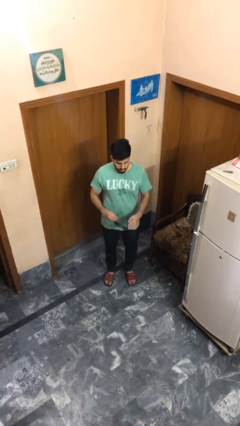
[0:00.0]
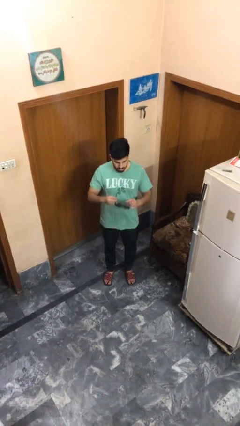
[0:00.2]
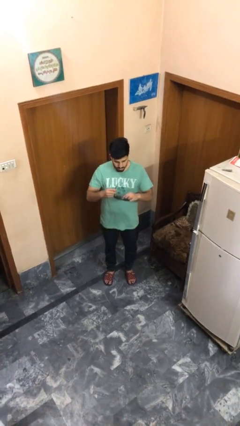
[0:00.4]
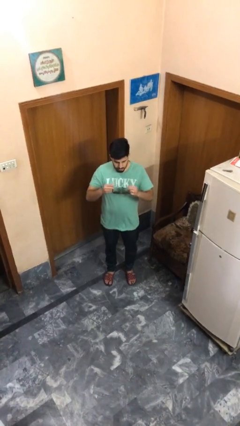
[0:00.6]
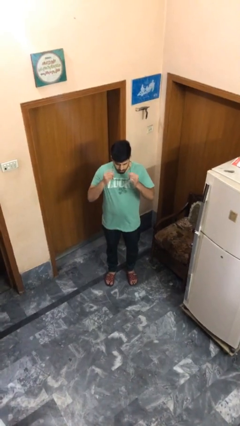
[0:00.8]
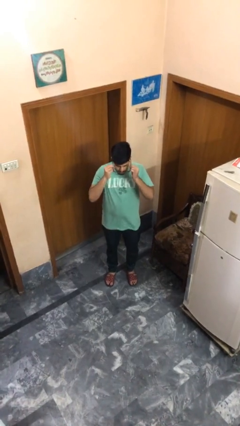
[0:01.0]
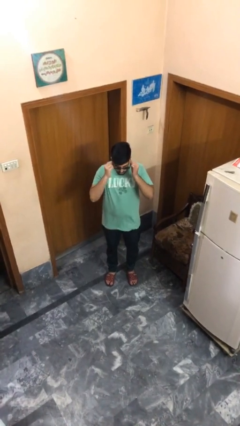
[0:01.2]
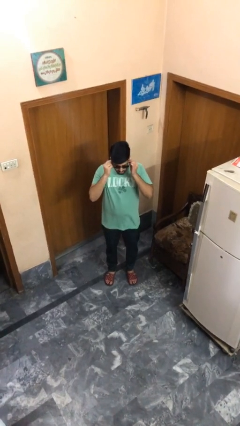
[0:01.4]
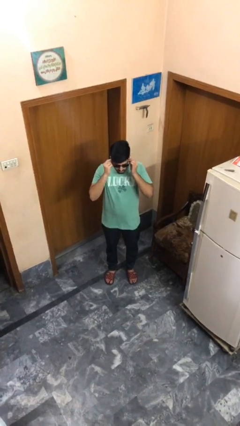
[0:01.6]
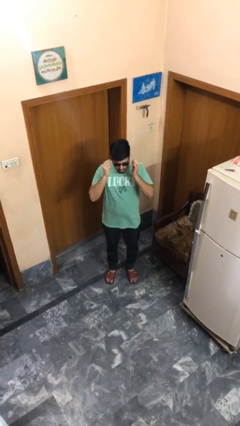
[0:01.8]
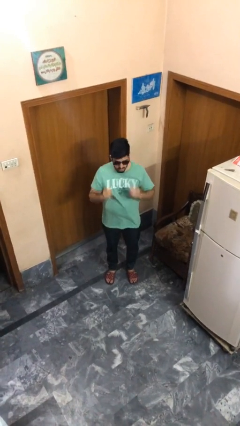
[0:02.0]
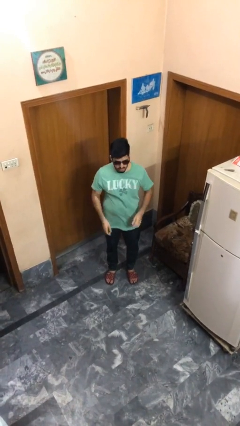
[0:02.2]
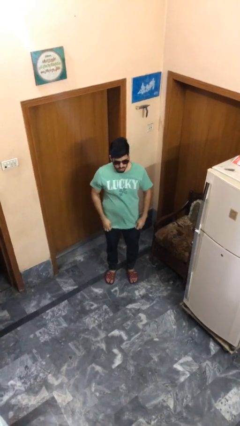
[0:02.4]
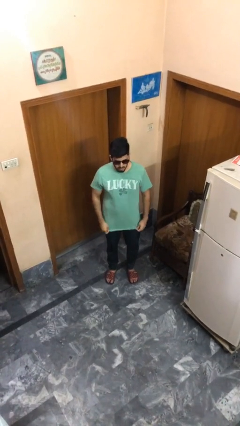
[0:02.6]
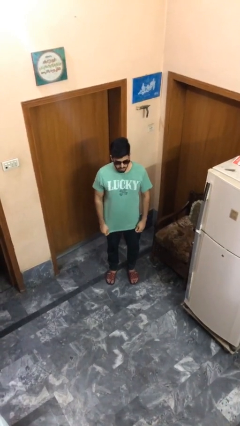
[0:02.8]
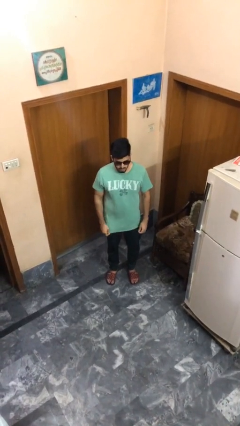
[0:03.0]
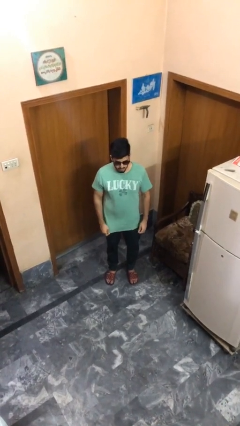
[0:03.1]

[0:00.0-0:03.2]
person puts on sunglasses

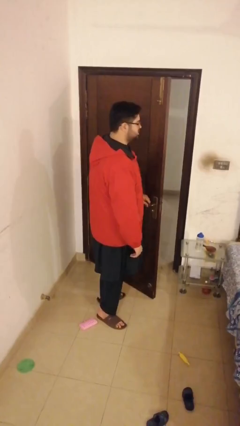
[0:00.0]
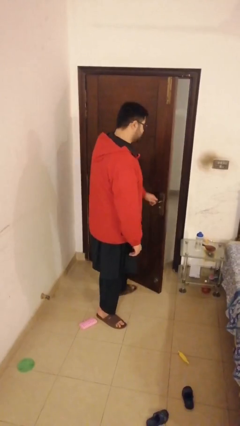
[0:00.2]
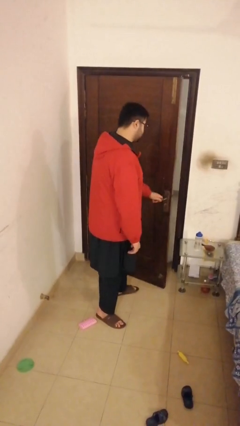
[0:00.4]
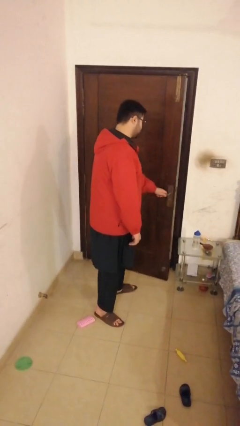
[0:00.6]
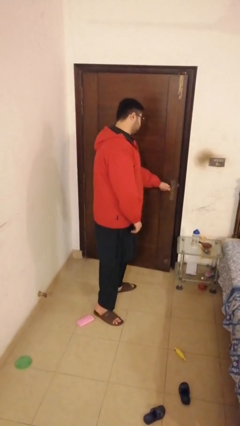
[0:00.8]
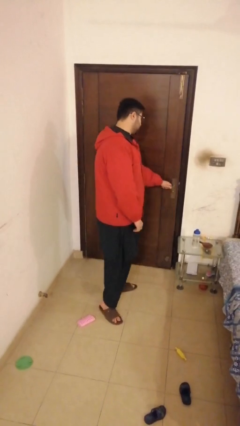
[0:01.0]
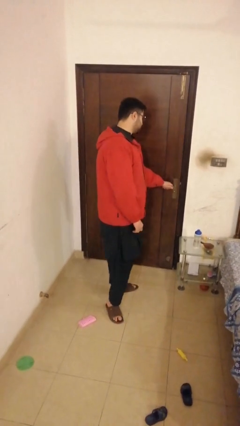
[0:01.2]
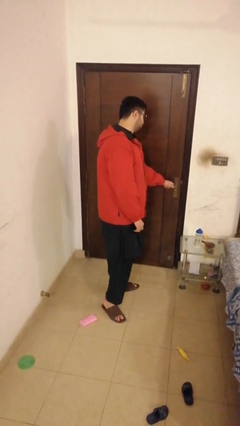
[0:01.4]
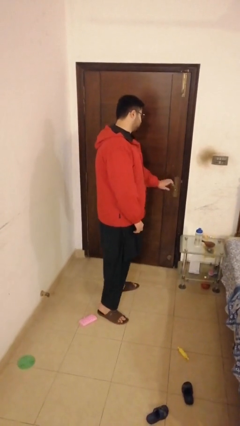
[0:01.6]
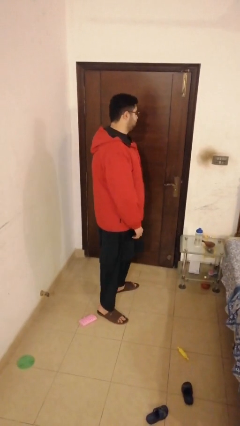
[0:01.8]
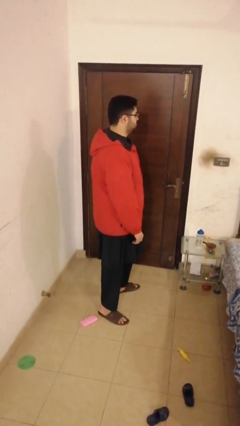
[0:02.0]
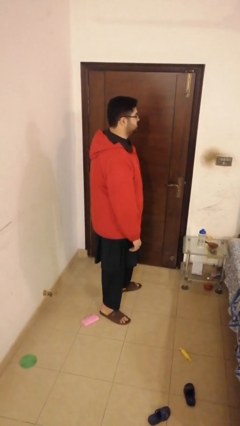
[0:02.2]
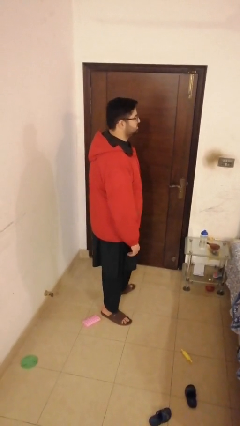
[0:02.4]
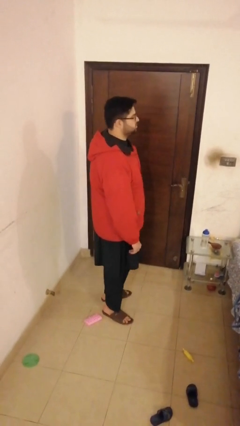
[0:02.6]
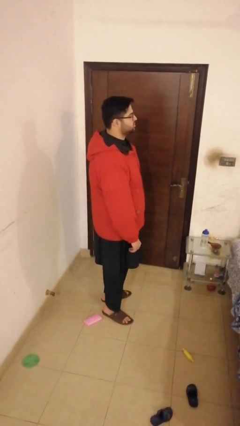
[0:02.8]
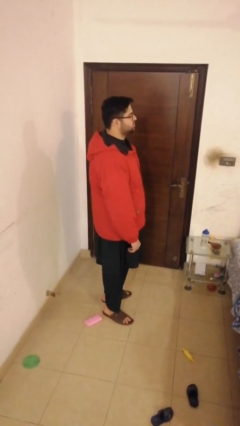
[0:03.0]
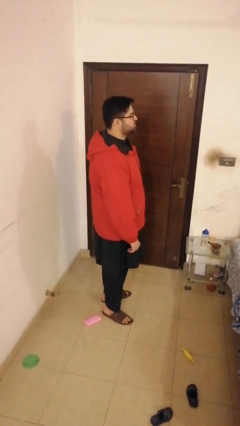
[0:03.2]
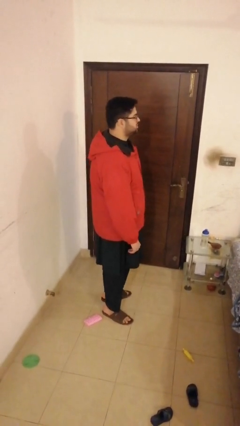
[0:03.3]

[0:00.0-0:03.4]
person closes facility door

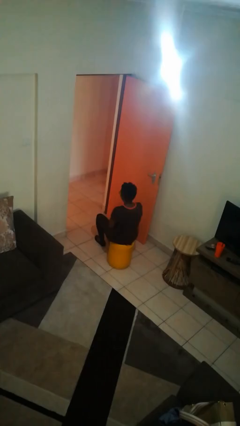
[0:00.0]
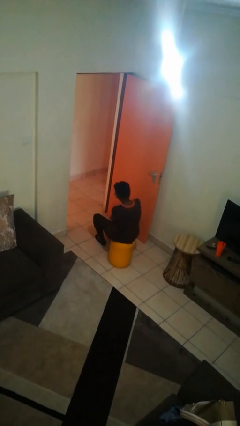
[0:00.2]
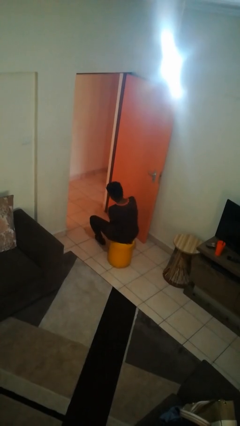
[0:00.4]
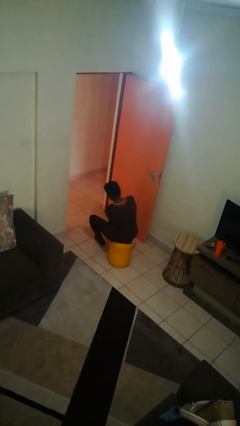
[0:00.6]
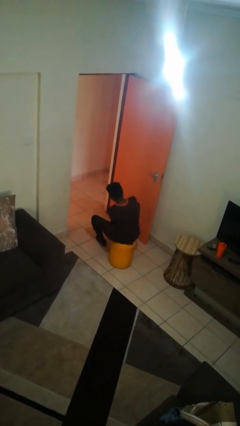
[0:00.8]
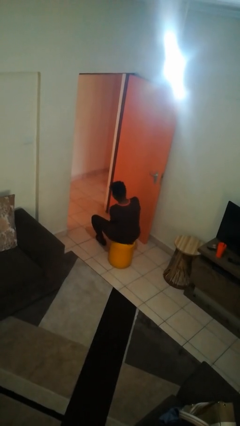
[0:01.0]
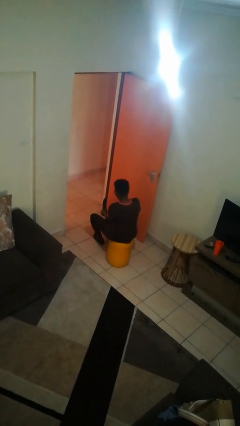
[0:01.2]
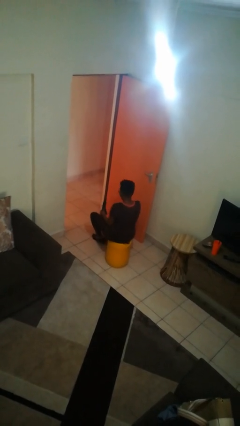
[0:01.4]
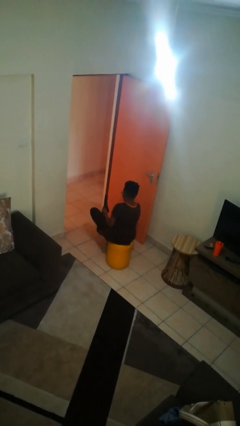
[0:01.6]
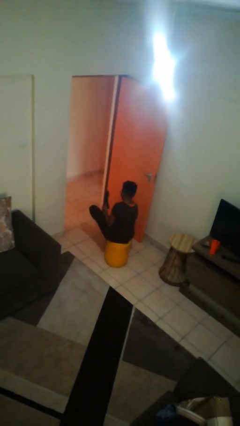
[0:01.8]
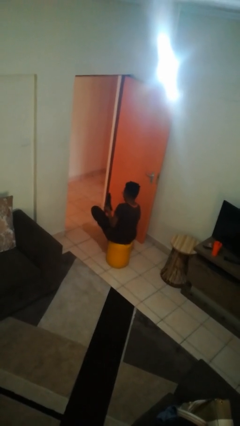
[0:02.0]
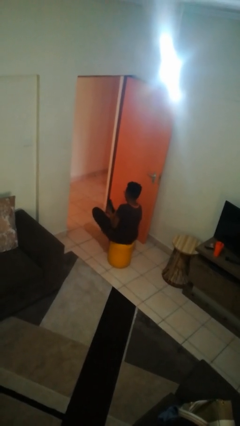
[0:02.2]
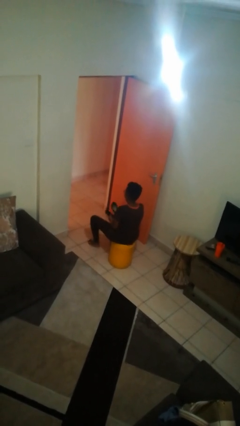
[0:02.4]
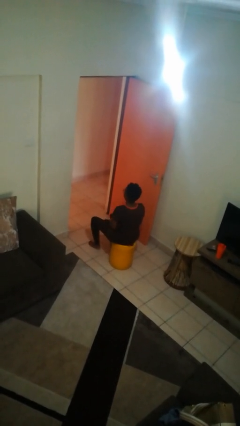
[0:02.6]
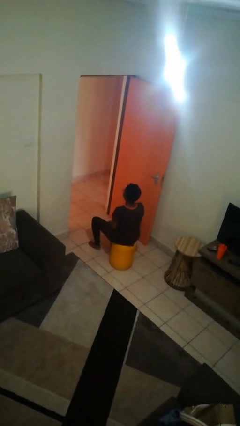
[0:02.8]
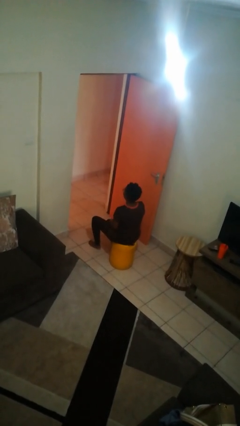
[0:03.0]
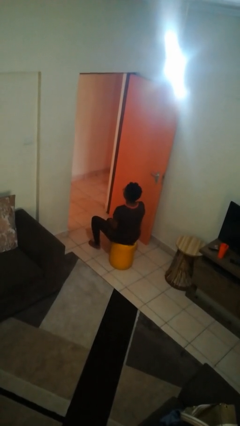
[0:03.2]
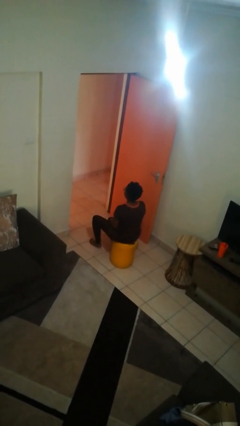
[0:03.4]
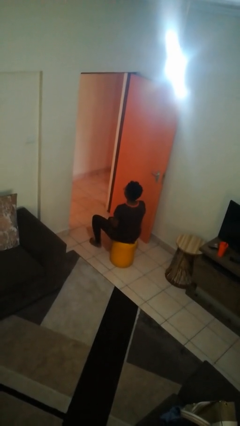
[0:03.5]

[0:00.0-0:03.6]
person takes off shoes

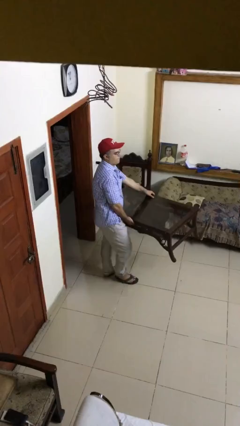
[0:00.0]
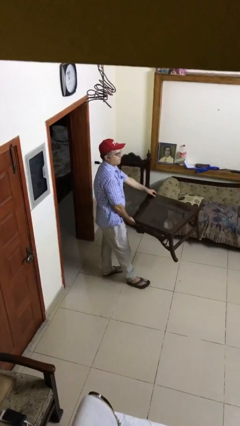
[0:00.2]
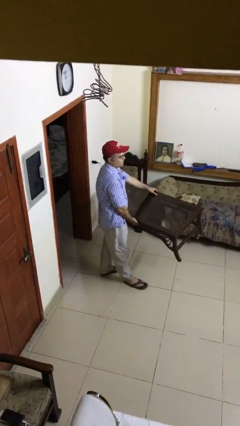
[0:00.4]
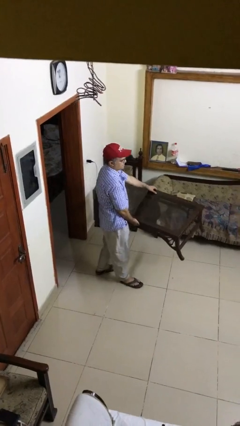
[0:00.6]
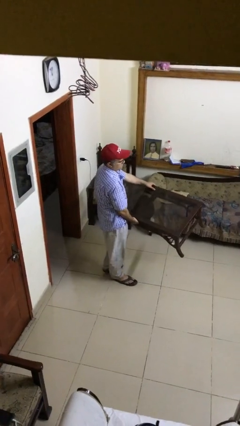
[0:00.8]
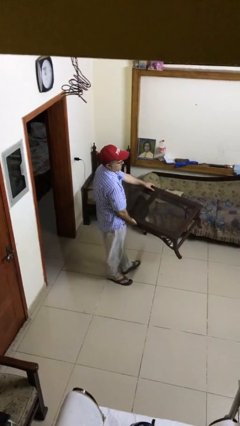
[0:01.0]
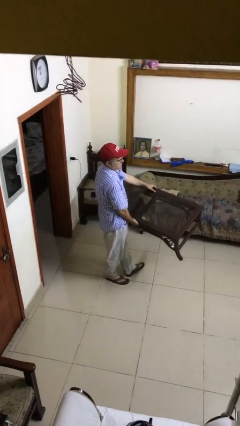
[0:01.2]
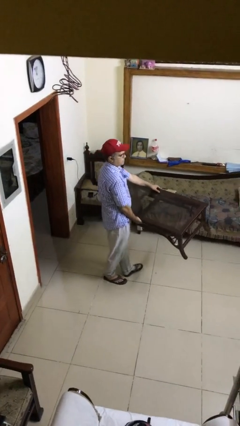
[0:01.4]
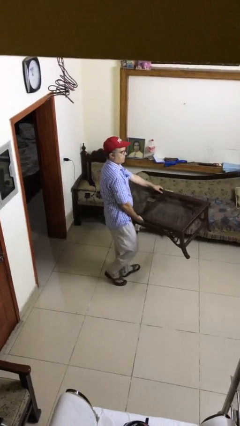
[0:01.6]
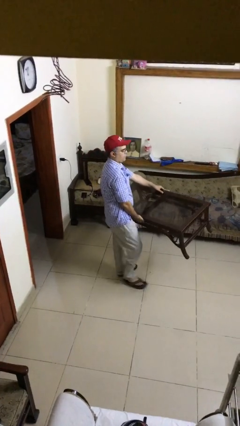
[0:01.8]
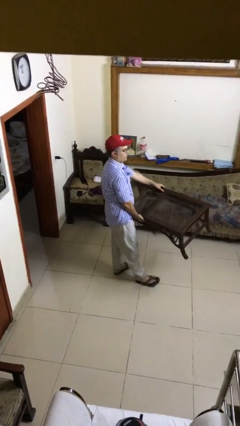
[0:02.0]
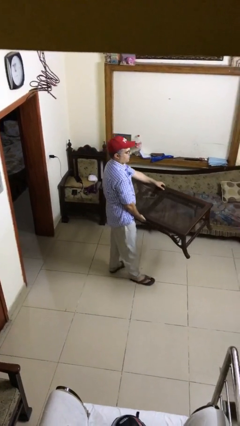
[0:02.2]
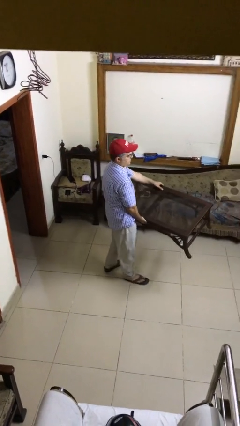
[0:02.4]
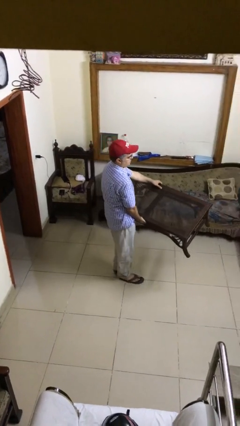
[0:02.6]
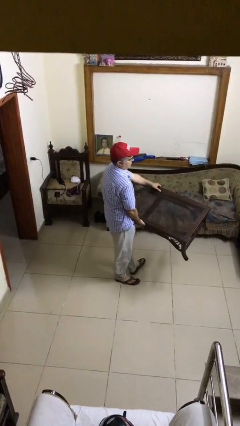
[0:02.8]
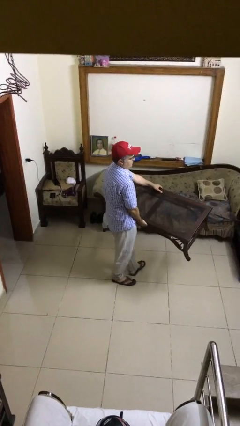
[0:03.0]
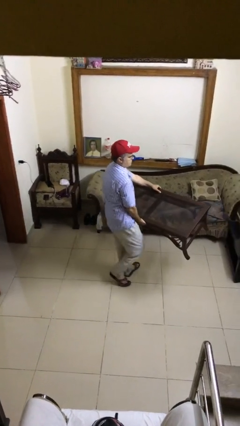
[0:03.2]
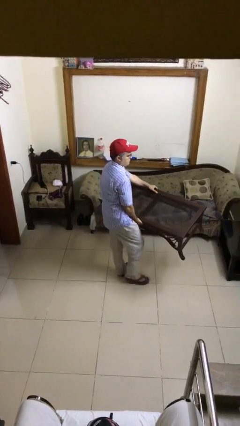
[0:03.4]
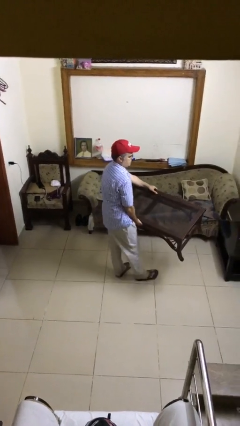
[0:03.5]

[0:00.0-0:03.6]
person carries heavy object

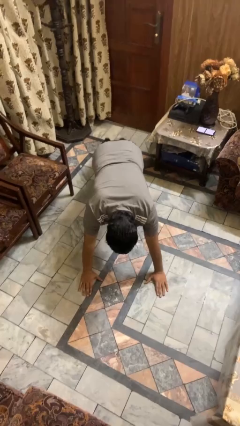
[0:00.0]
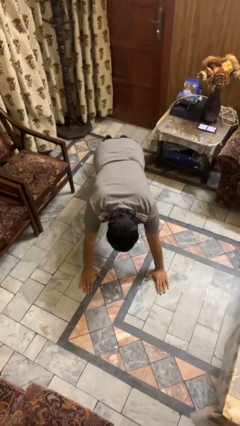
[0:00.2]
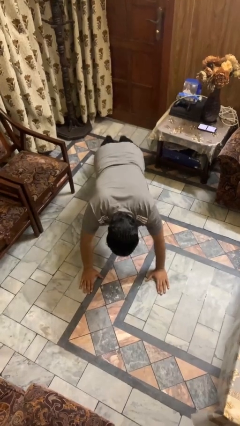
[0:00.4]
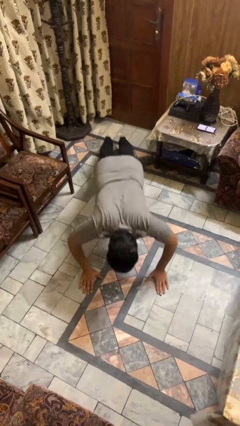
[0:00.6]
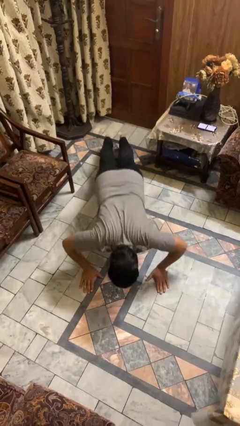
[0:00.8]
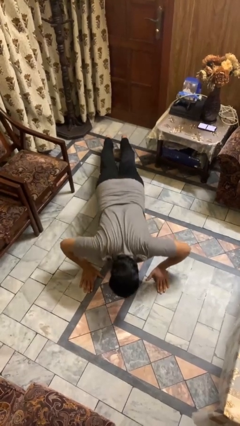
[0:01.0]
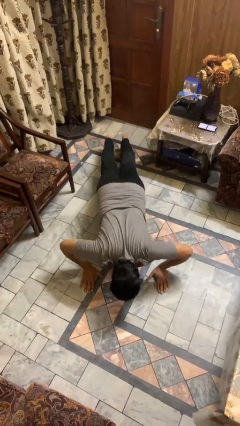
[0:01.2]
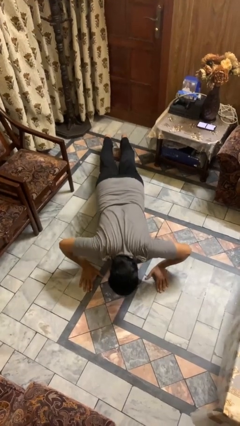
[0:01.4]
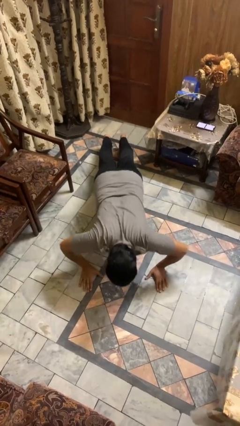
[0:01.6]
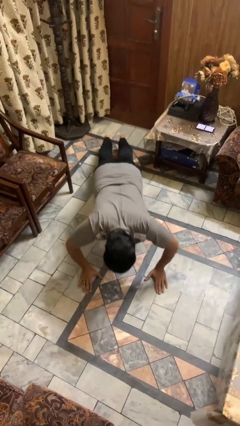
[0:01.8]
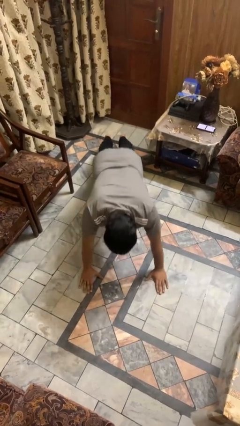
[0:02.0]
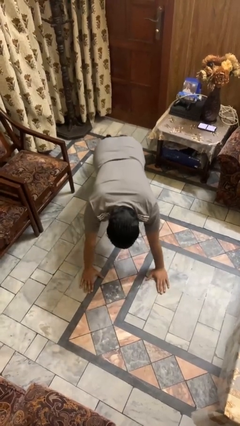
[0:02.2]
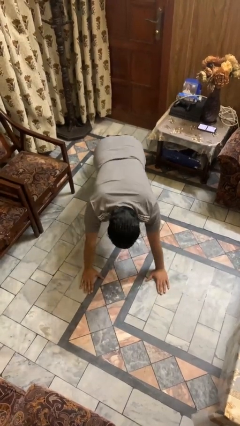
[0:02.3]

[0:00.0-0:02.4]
person exercises with pushup

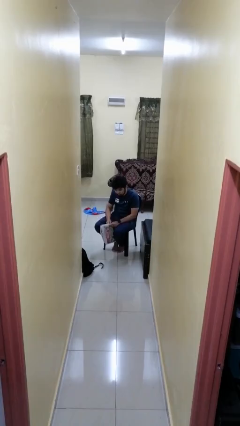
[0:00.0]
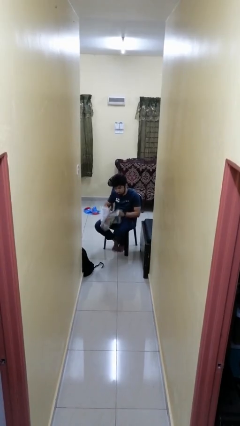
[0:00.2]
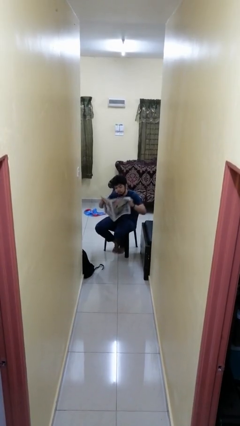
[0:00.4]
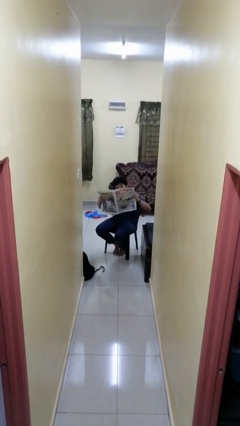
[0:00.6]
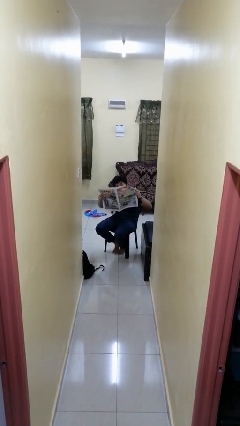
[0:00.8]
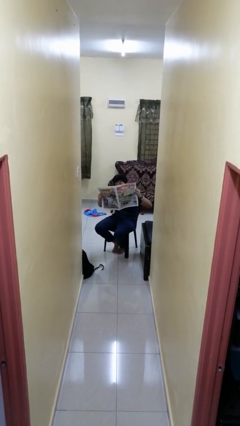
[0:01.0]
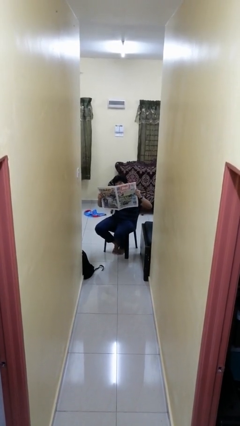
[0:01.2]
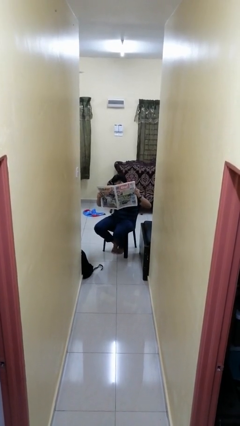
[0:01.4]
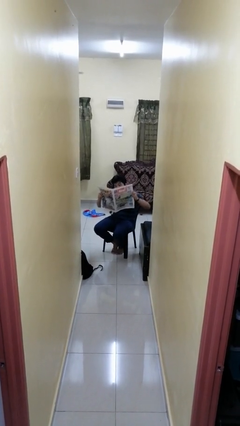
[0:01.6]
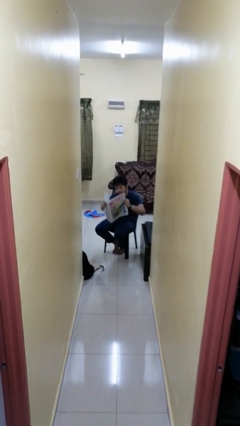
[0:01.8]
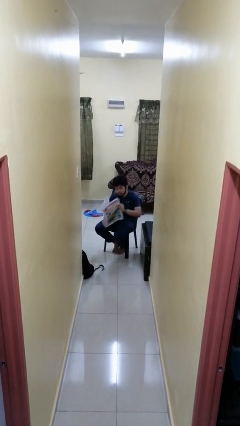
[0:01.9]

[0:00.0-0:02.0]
person reads newspaper
